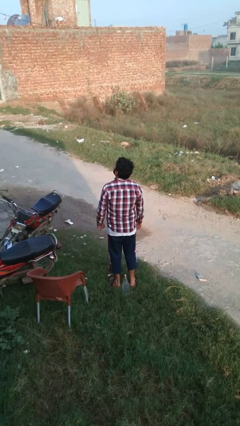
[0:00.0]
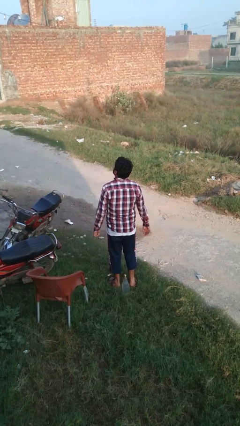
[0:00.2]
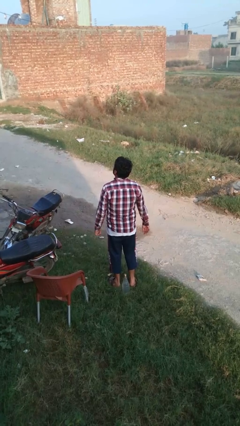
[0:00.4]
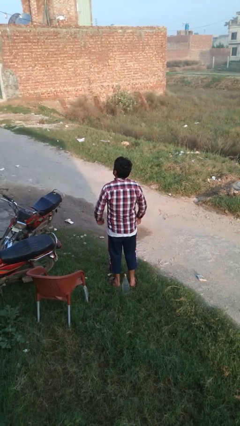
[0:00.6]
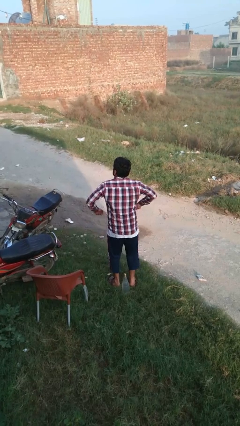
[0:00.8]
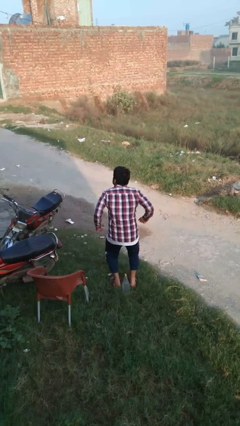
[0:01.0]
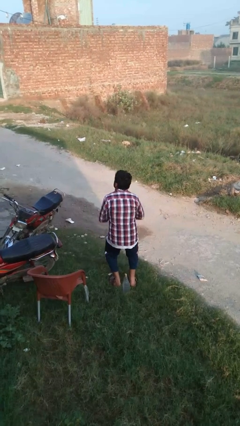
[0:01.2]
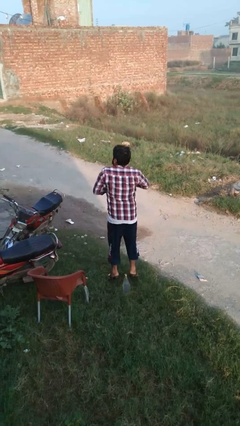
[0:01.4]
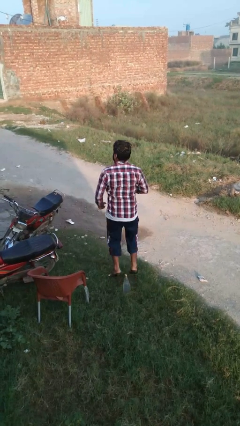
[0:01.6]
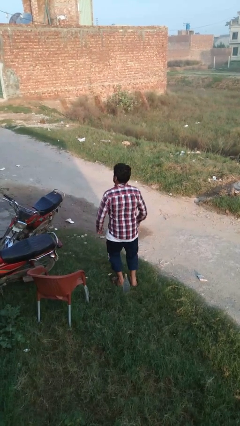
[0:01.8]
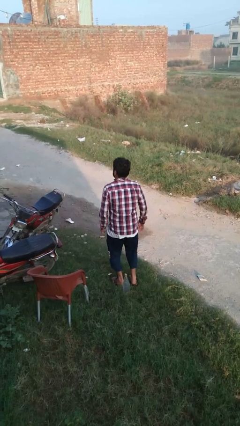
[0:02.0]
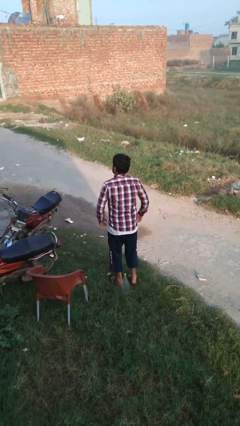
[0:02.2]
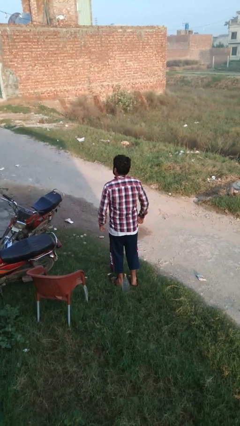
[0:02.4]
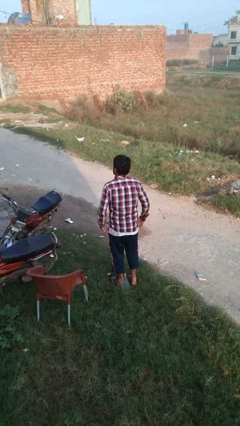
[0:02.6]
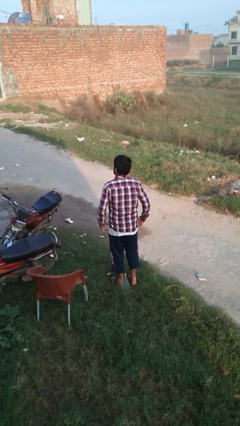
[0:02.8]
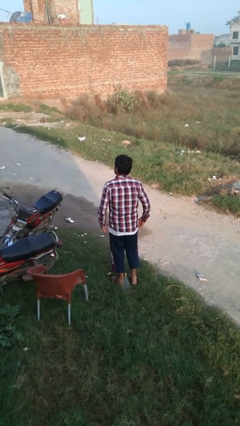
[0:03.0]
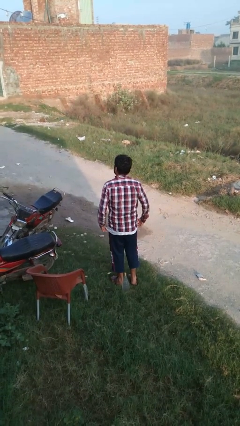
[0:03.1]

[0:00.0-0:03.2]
person jumps

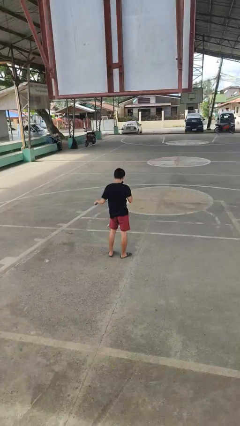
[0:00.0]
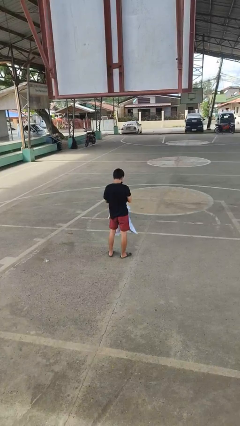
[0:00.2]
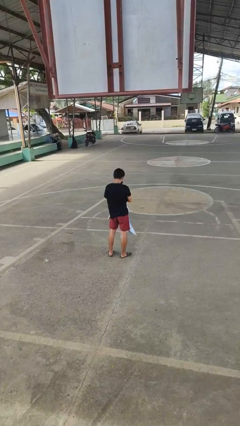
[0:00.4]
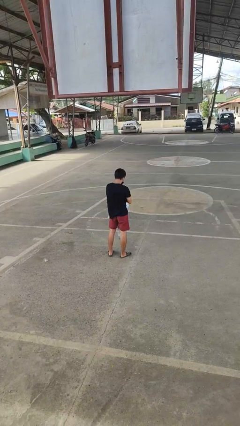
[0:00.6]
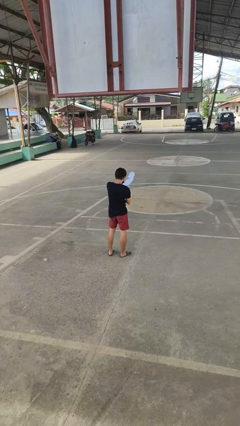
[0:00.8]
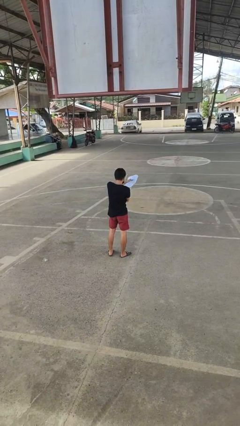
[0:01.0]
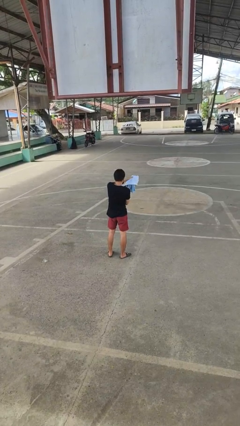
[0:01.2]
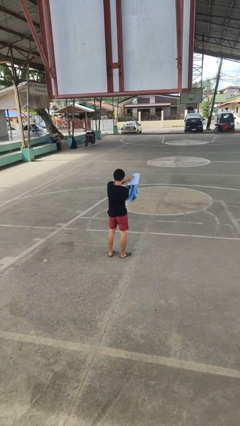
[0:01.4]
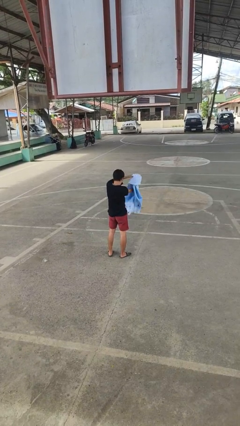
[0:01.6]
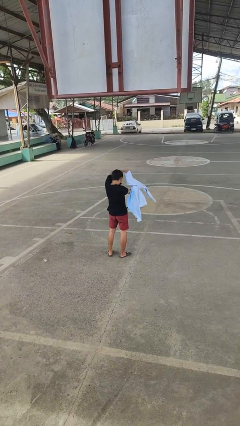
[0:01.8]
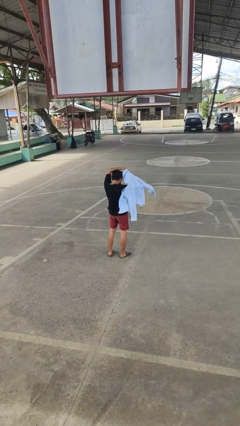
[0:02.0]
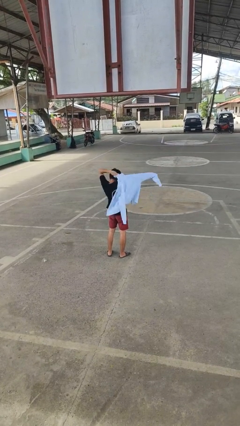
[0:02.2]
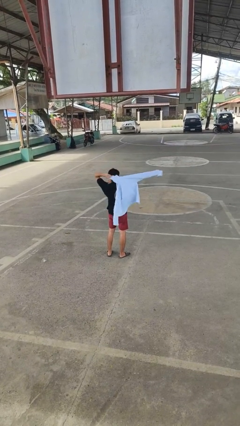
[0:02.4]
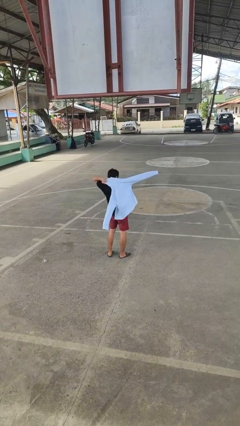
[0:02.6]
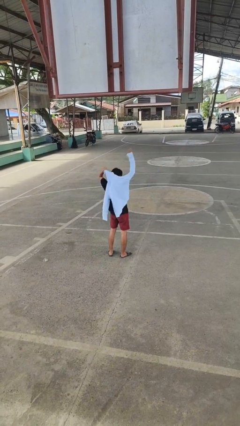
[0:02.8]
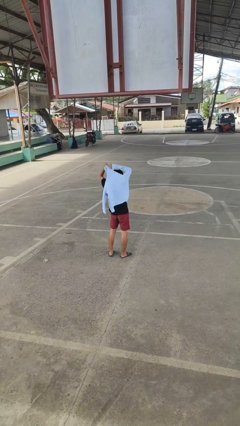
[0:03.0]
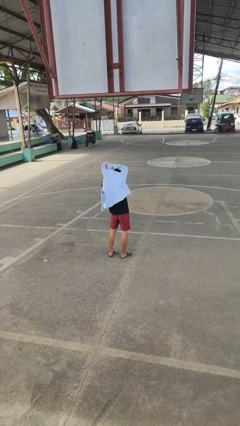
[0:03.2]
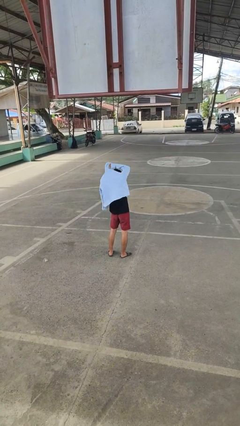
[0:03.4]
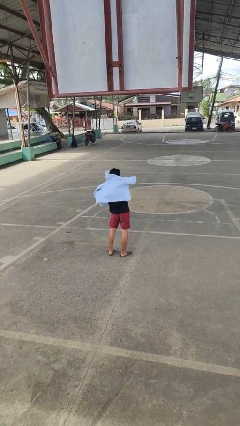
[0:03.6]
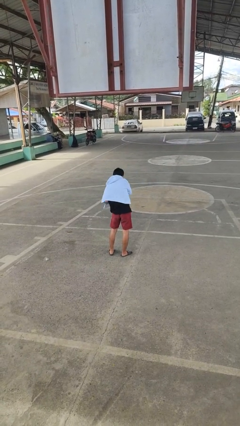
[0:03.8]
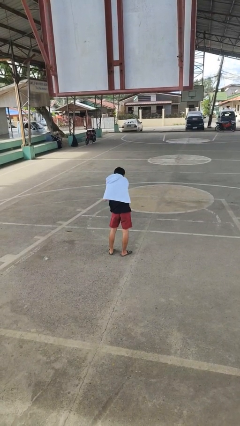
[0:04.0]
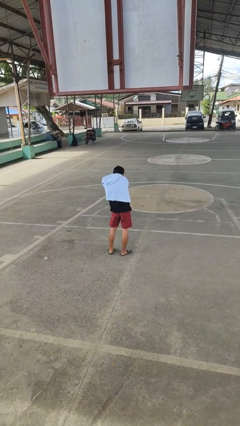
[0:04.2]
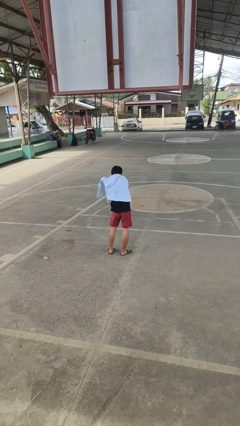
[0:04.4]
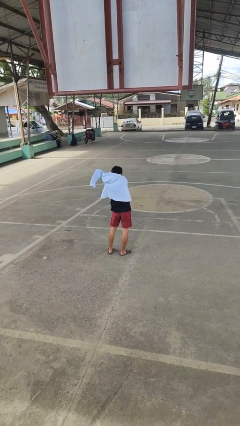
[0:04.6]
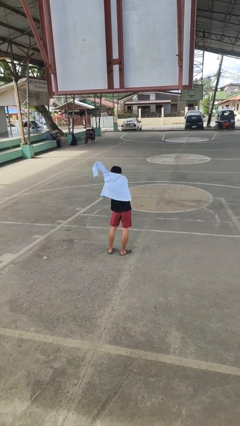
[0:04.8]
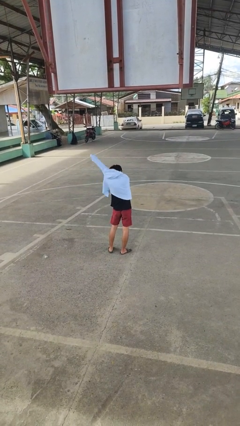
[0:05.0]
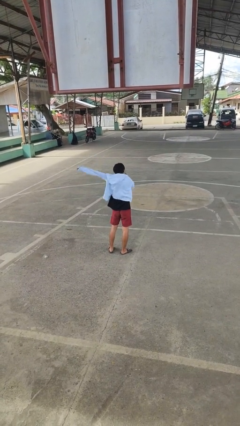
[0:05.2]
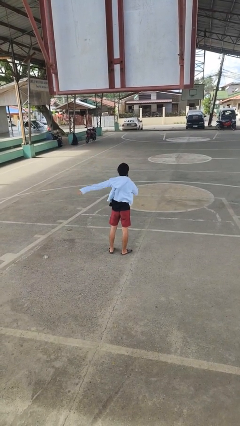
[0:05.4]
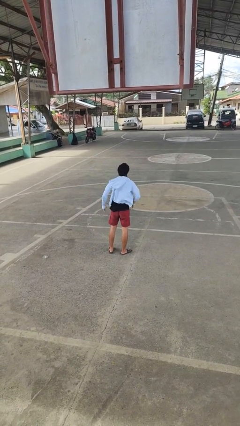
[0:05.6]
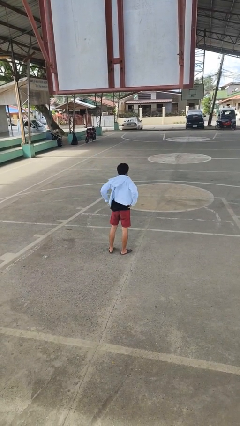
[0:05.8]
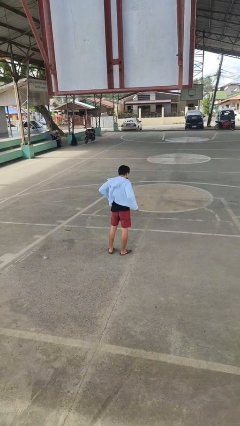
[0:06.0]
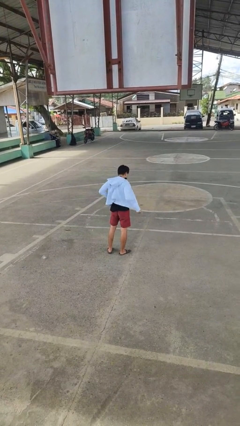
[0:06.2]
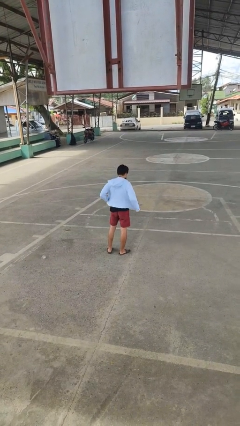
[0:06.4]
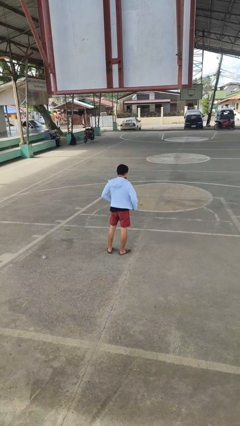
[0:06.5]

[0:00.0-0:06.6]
person puts on jacket

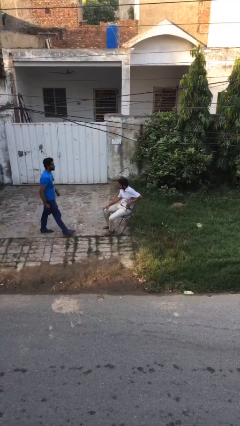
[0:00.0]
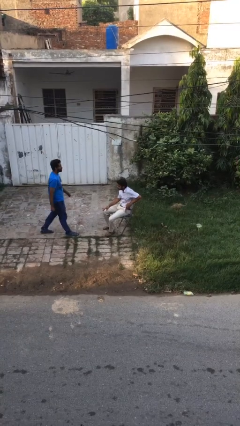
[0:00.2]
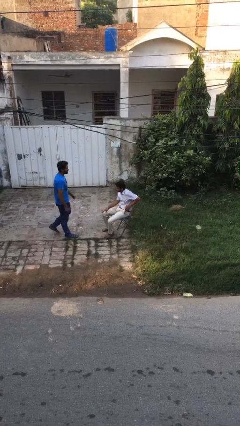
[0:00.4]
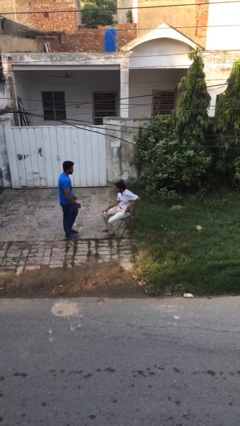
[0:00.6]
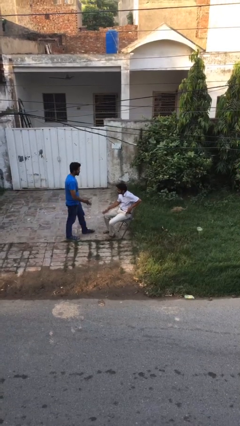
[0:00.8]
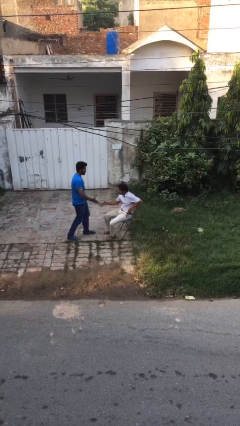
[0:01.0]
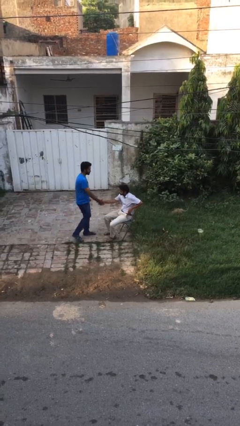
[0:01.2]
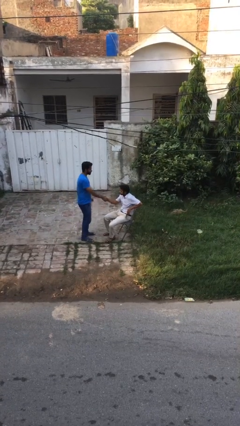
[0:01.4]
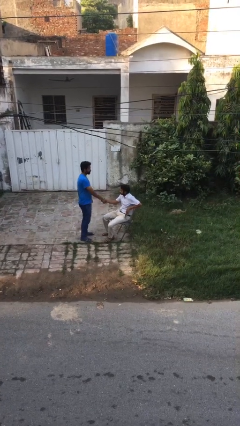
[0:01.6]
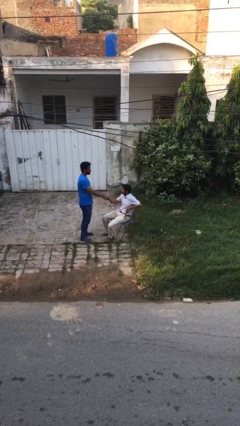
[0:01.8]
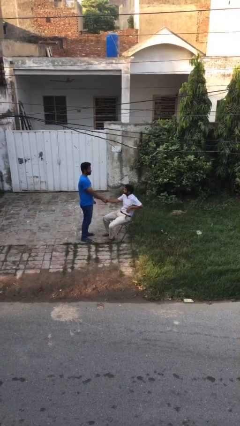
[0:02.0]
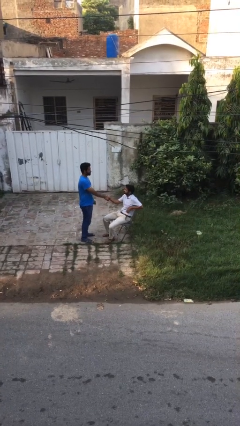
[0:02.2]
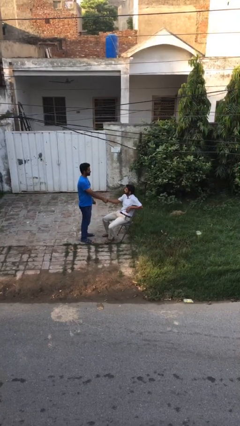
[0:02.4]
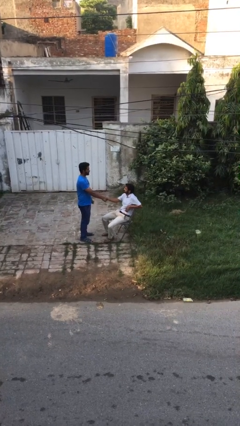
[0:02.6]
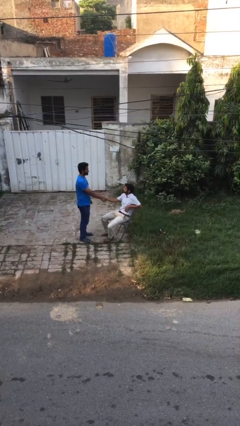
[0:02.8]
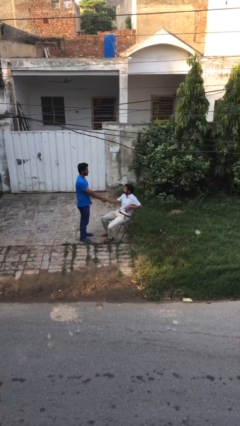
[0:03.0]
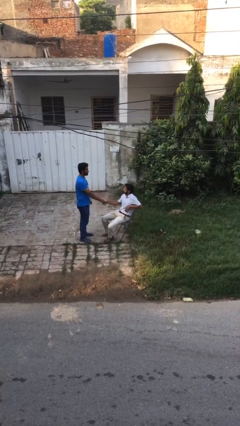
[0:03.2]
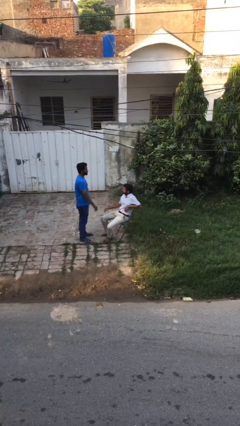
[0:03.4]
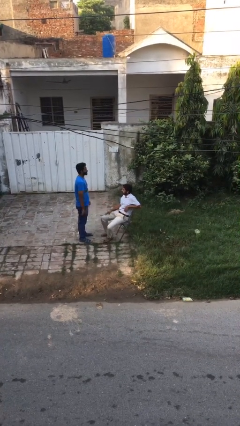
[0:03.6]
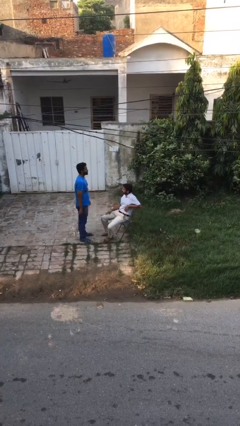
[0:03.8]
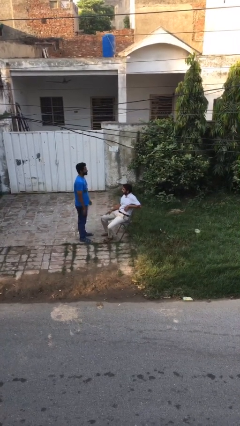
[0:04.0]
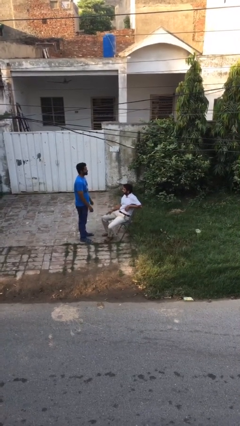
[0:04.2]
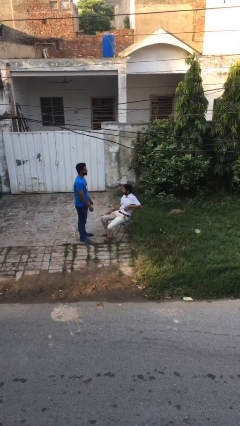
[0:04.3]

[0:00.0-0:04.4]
person shakes hand

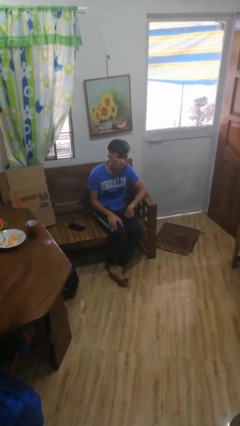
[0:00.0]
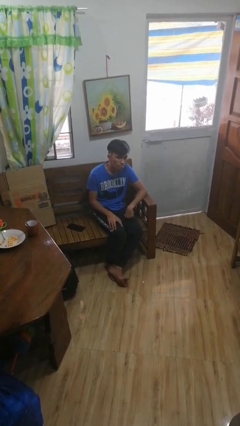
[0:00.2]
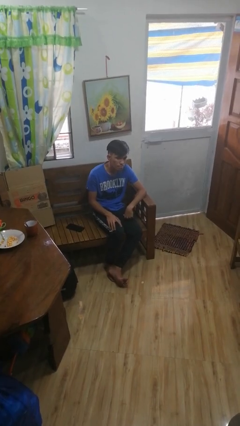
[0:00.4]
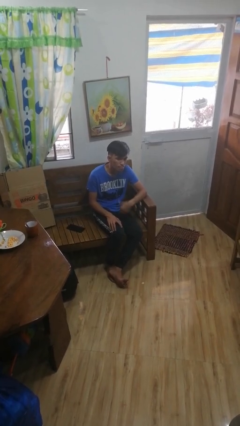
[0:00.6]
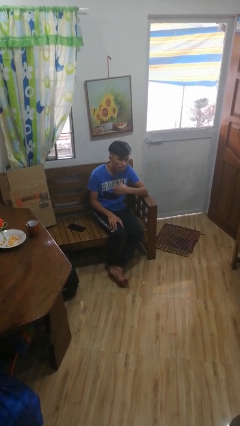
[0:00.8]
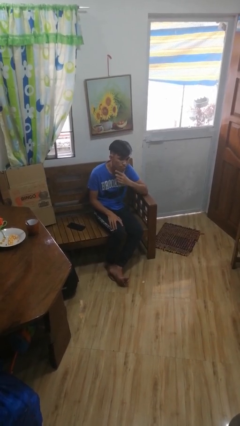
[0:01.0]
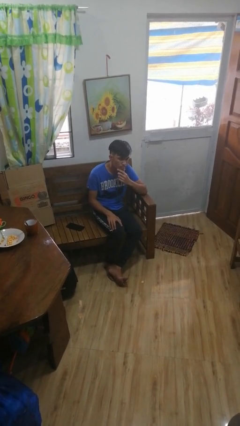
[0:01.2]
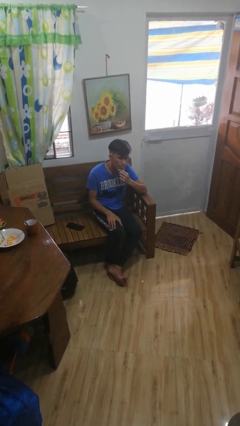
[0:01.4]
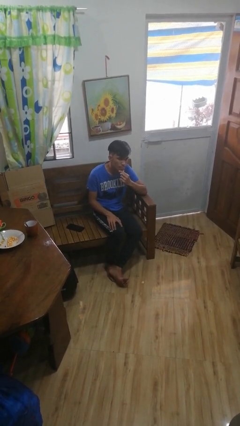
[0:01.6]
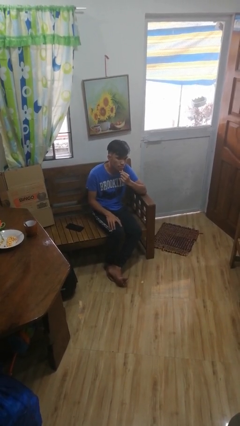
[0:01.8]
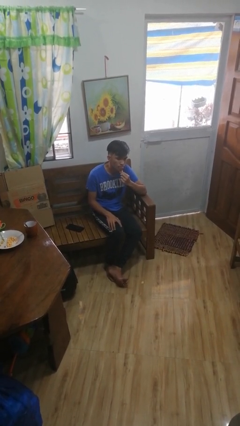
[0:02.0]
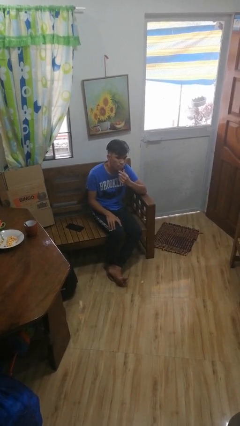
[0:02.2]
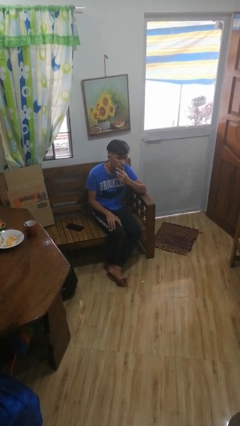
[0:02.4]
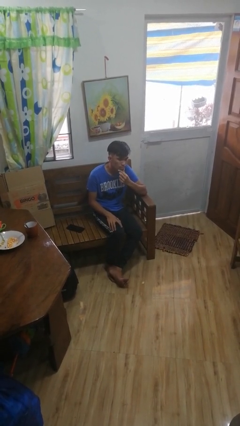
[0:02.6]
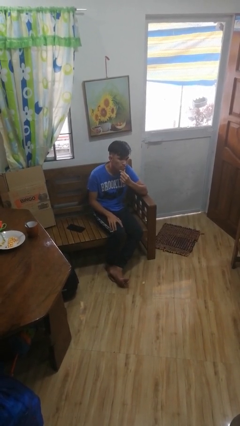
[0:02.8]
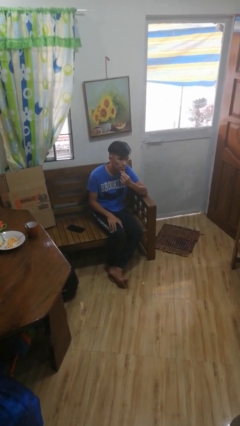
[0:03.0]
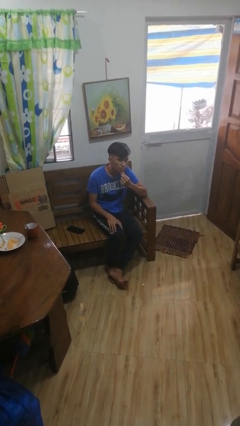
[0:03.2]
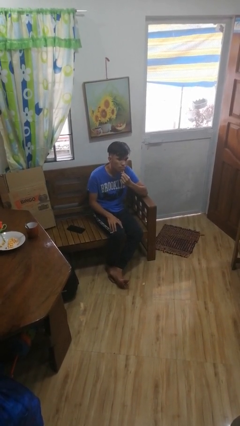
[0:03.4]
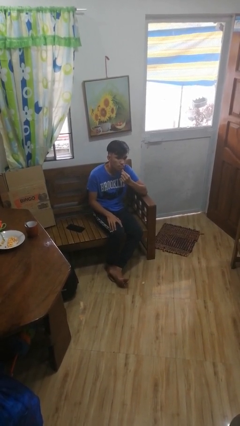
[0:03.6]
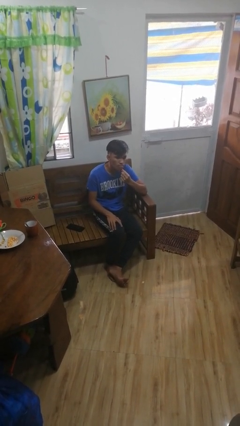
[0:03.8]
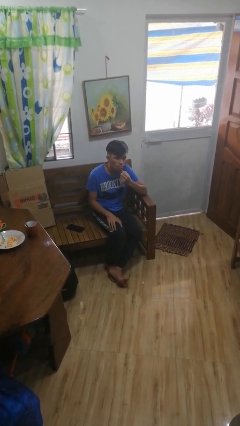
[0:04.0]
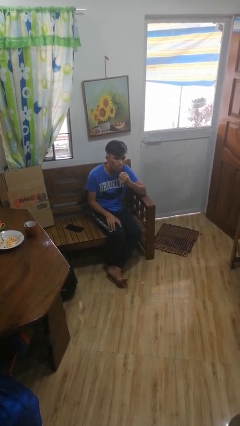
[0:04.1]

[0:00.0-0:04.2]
person strokes chin
